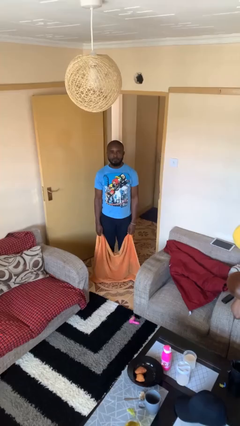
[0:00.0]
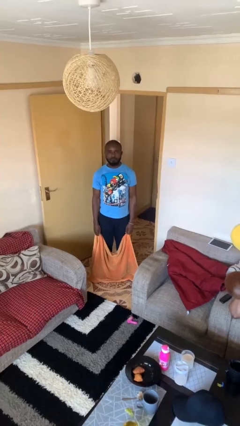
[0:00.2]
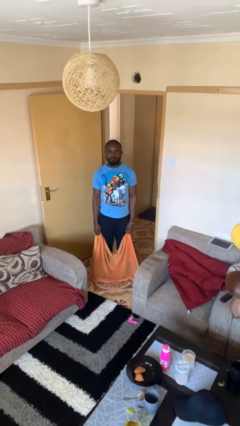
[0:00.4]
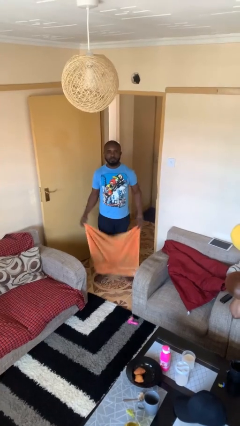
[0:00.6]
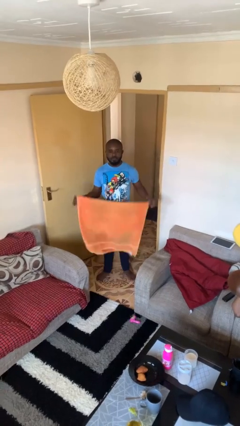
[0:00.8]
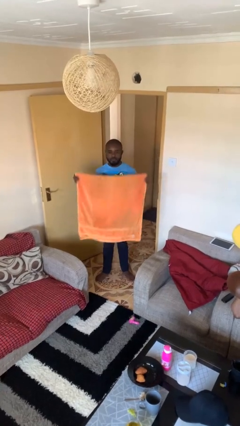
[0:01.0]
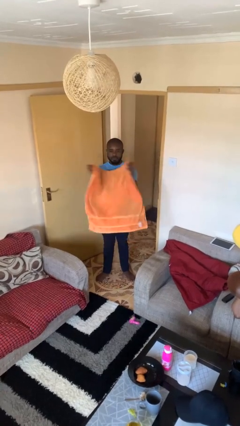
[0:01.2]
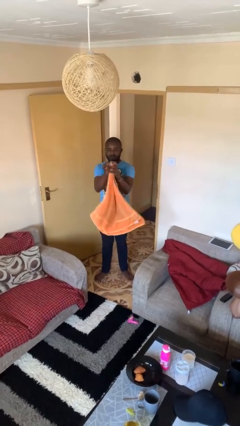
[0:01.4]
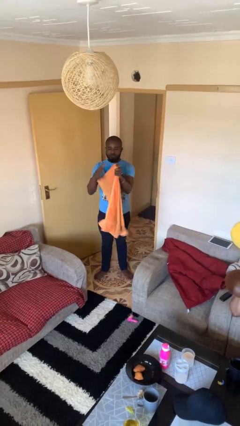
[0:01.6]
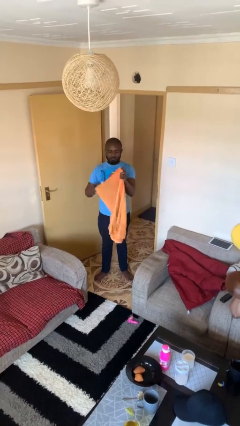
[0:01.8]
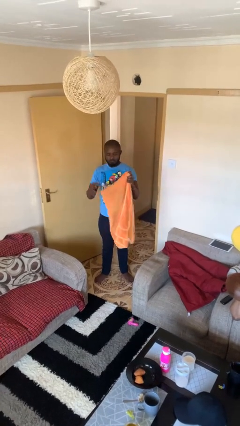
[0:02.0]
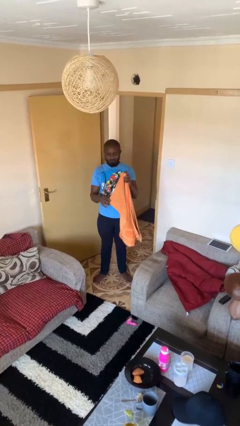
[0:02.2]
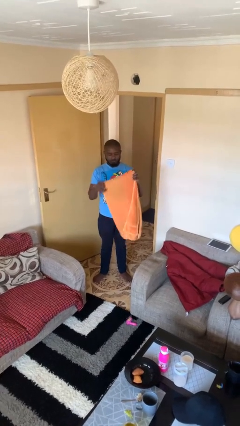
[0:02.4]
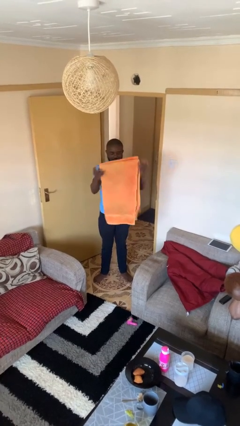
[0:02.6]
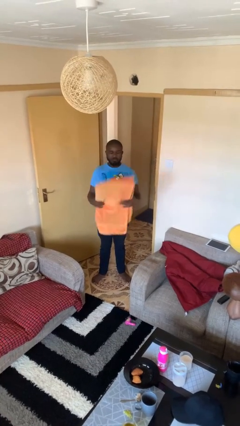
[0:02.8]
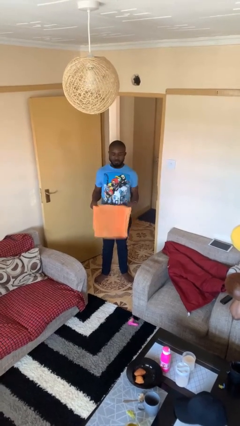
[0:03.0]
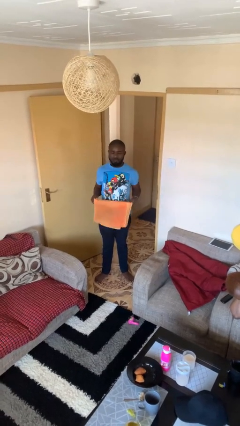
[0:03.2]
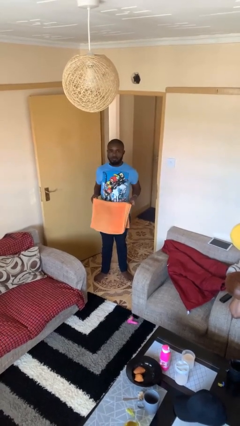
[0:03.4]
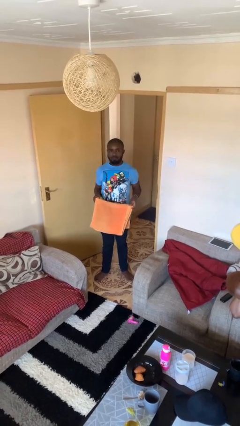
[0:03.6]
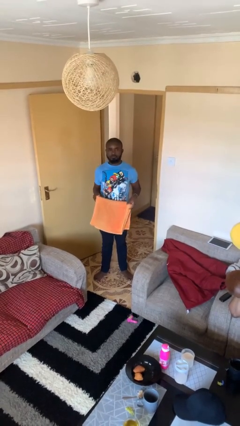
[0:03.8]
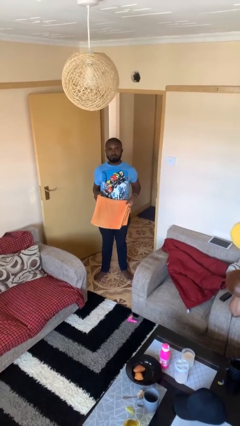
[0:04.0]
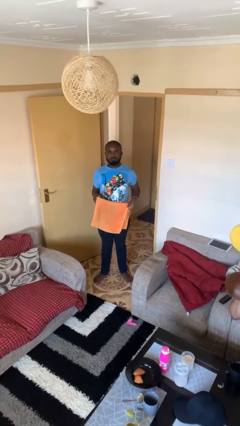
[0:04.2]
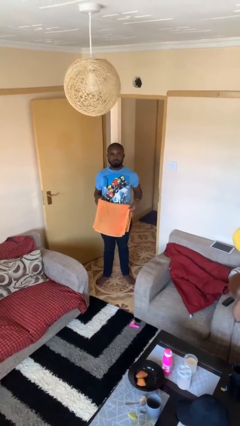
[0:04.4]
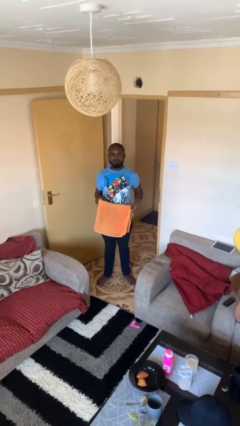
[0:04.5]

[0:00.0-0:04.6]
person folds towel

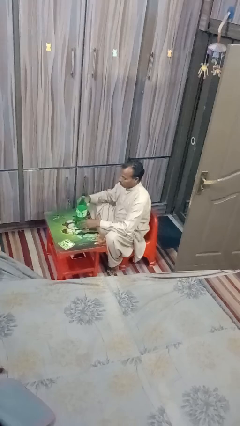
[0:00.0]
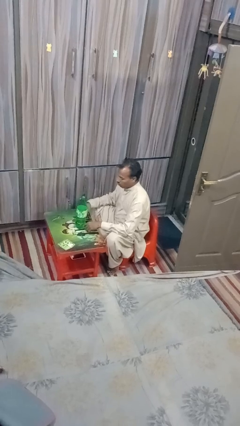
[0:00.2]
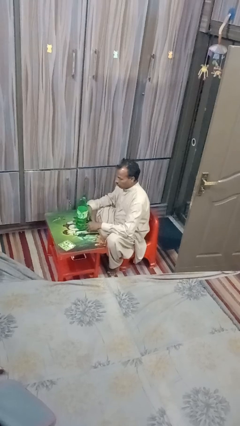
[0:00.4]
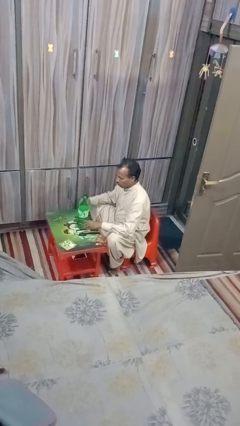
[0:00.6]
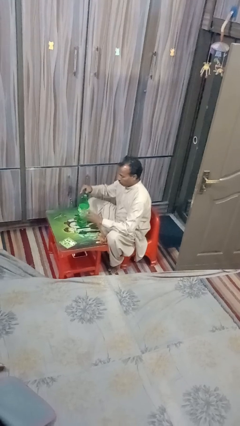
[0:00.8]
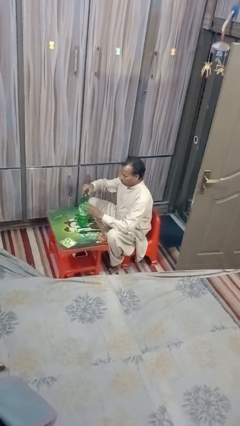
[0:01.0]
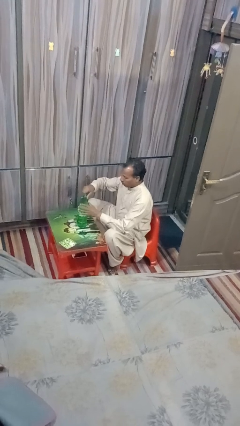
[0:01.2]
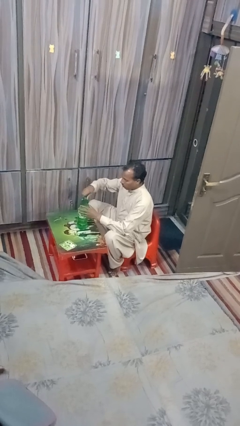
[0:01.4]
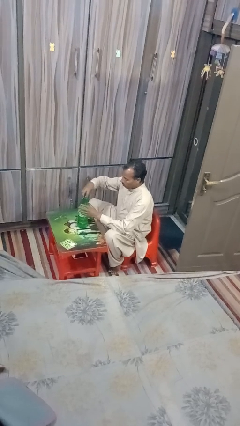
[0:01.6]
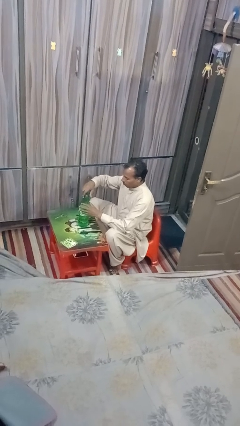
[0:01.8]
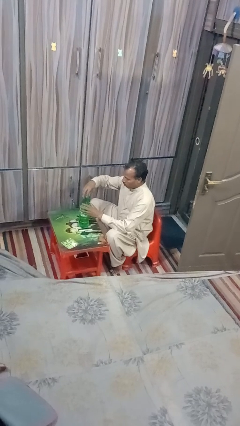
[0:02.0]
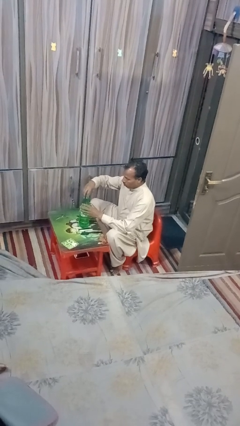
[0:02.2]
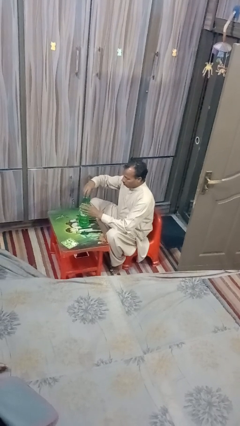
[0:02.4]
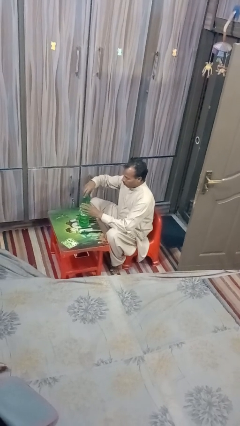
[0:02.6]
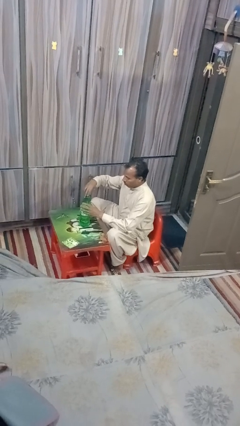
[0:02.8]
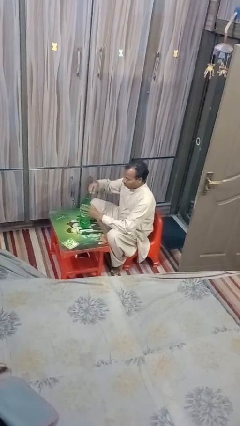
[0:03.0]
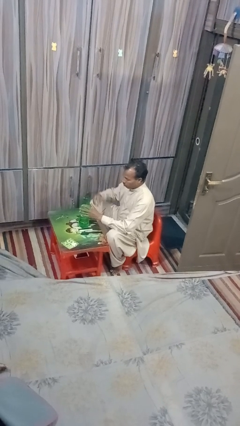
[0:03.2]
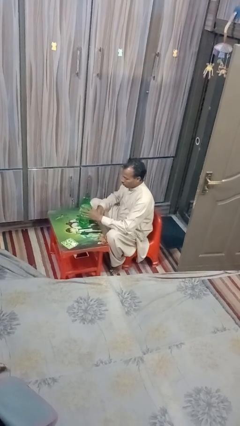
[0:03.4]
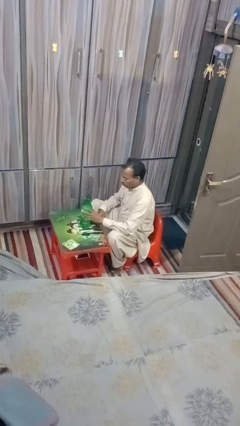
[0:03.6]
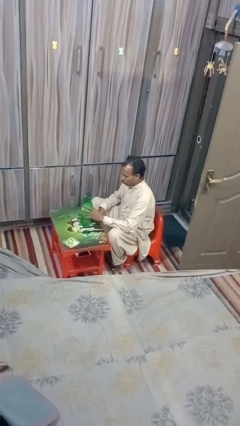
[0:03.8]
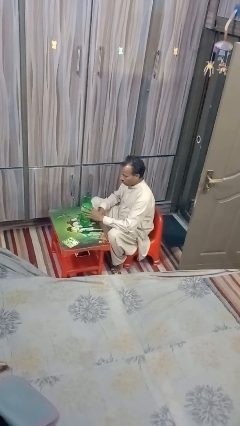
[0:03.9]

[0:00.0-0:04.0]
person unscrews lid from bottle

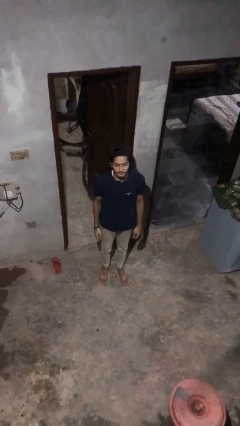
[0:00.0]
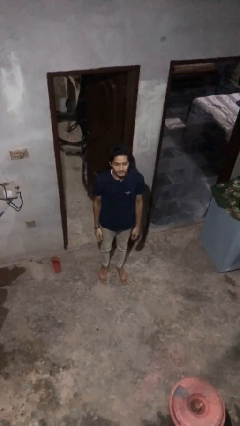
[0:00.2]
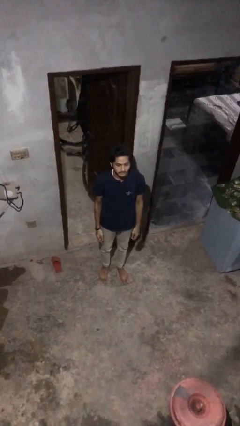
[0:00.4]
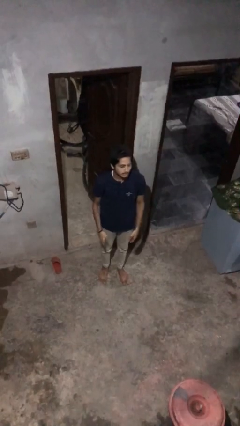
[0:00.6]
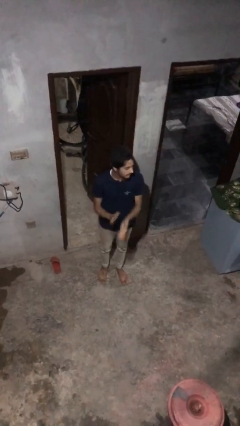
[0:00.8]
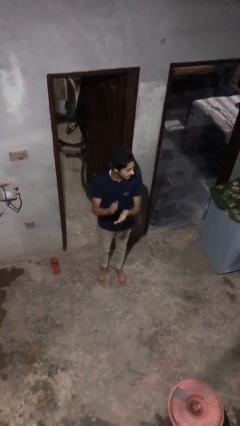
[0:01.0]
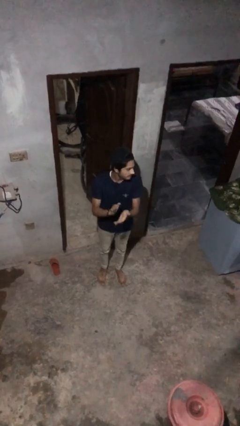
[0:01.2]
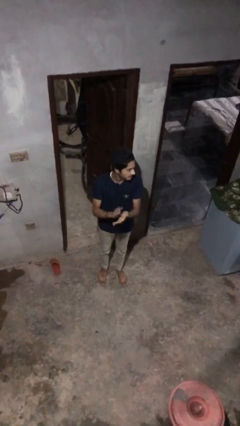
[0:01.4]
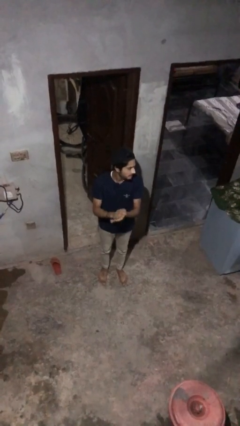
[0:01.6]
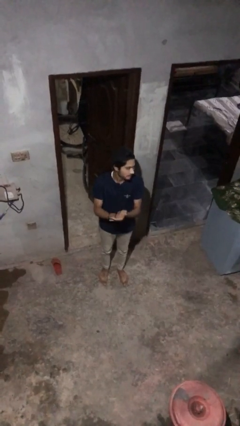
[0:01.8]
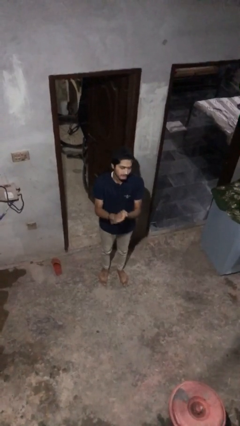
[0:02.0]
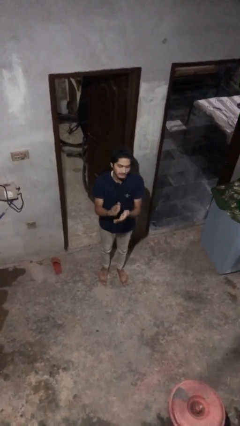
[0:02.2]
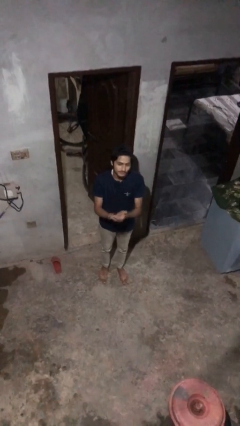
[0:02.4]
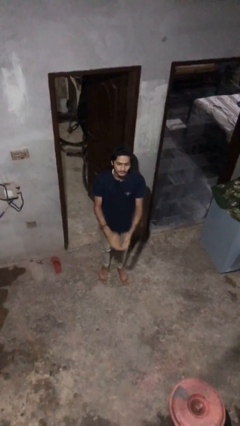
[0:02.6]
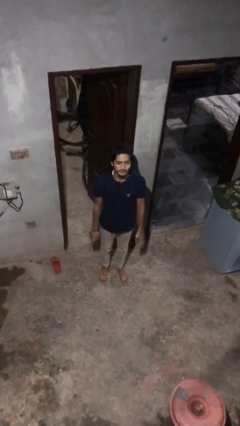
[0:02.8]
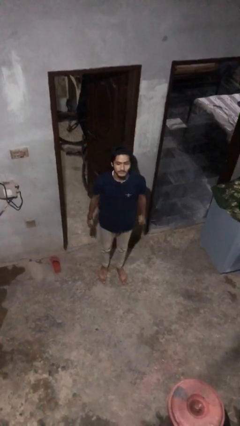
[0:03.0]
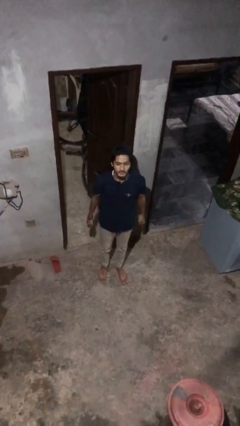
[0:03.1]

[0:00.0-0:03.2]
person claps hands

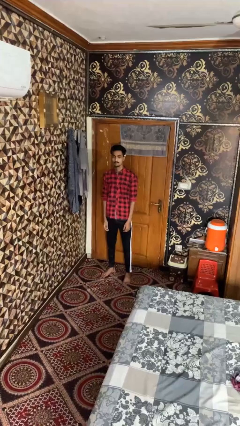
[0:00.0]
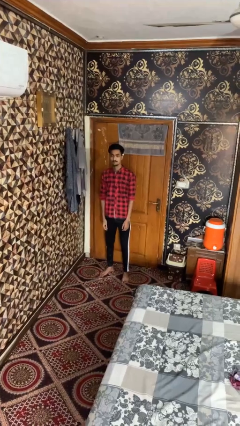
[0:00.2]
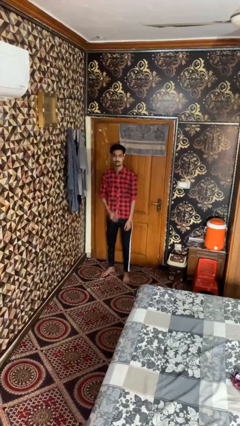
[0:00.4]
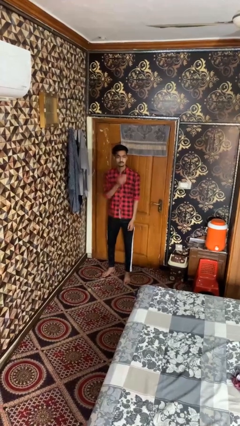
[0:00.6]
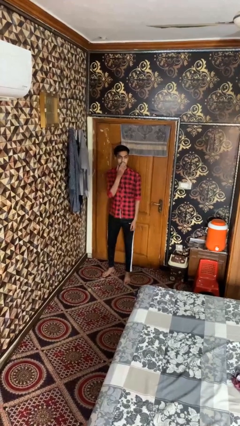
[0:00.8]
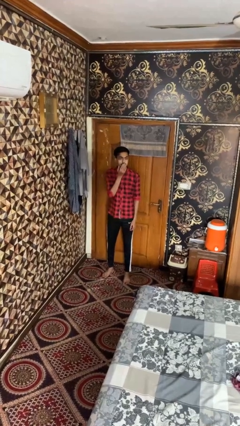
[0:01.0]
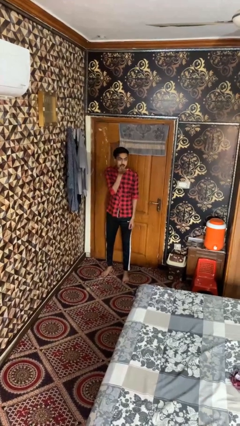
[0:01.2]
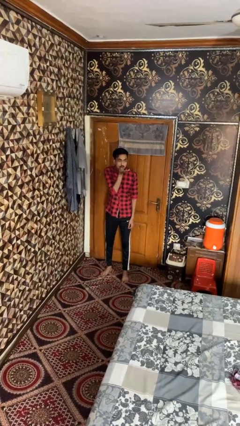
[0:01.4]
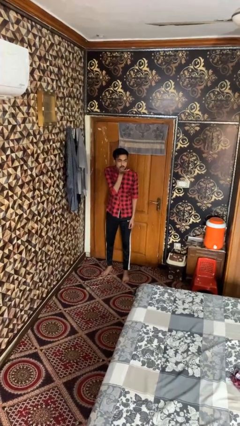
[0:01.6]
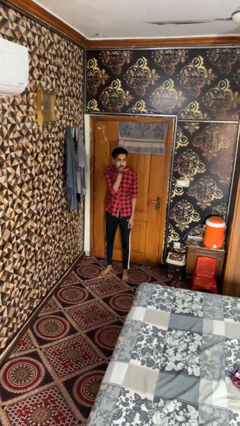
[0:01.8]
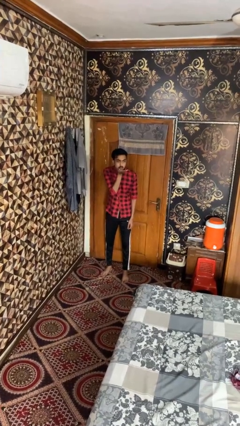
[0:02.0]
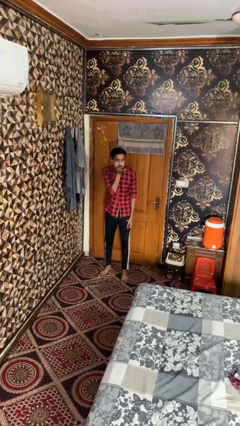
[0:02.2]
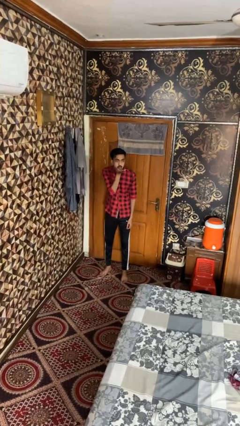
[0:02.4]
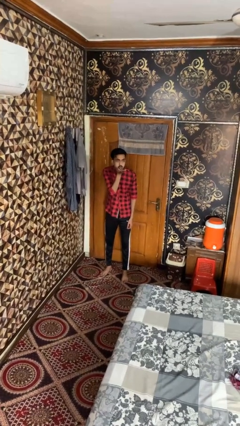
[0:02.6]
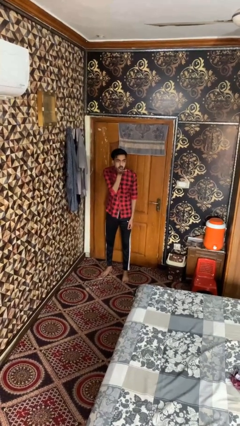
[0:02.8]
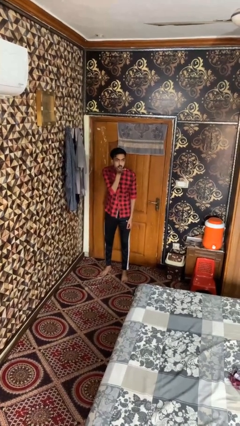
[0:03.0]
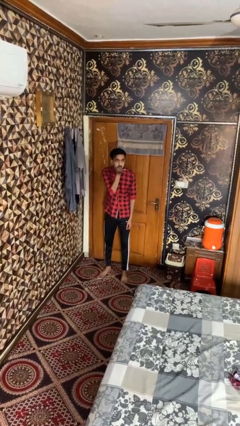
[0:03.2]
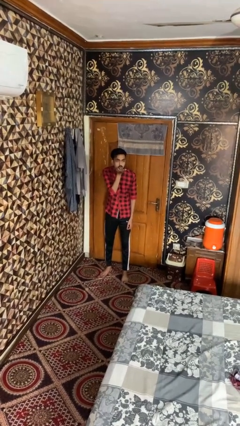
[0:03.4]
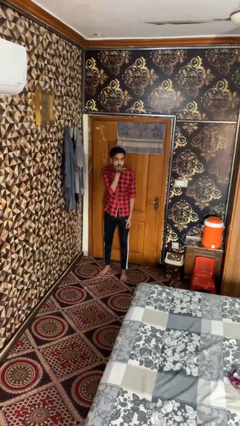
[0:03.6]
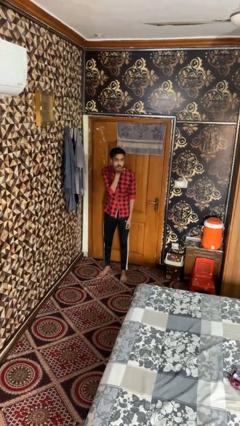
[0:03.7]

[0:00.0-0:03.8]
person gestures blow kiss

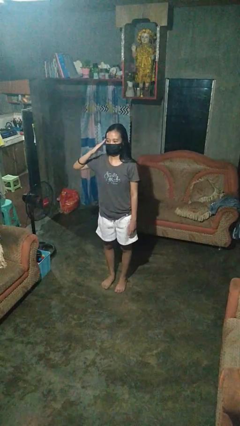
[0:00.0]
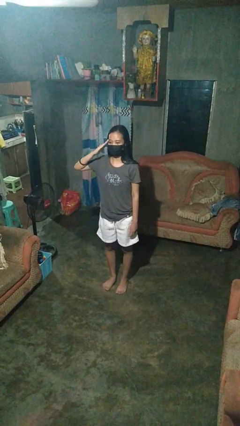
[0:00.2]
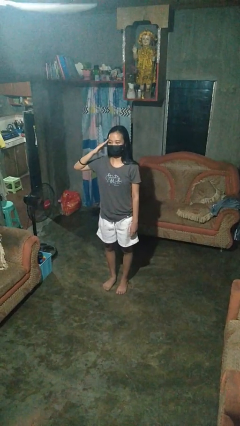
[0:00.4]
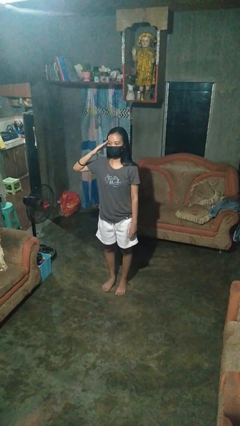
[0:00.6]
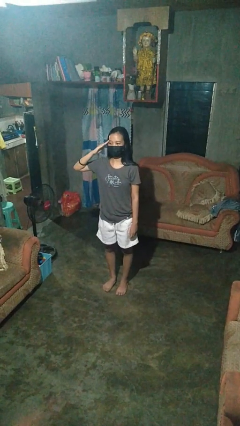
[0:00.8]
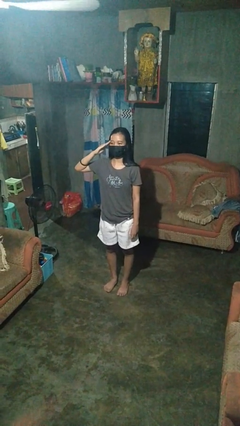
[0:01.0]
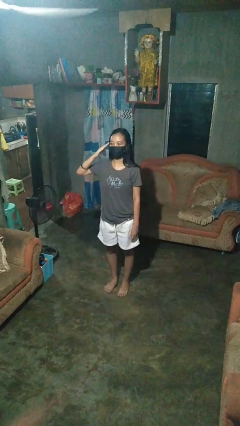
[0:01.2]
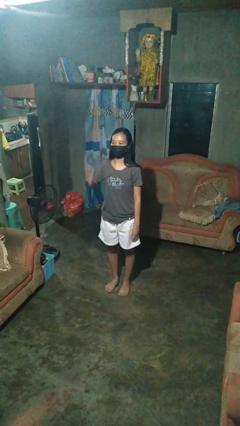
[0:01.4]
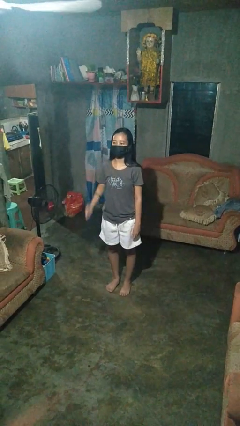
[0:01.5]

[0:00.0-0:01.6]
person salutes

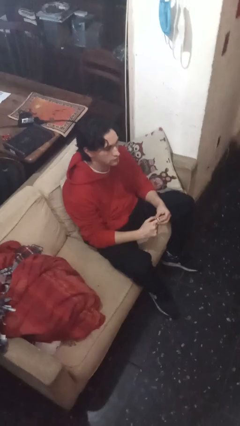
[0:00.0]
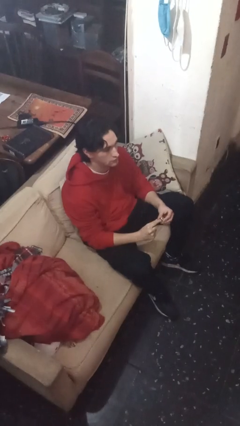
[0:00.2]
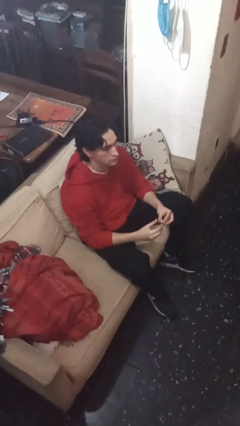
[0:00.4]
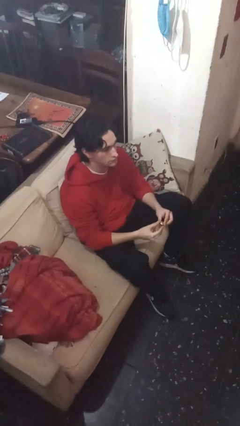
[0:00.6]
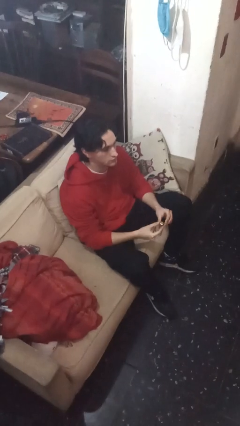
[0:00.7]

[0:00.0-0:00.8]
person takes off ring
